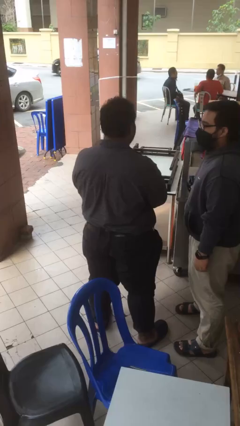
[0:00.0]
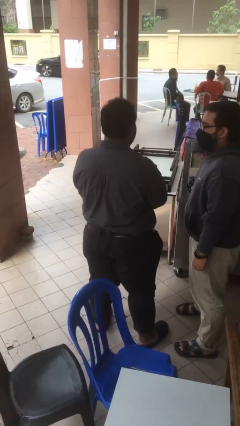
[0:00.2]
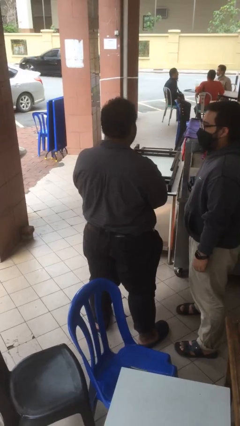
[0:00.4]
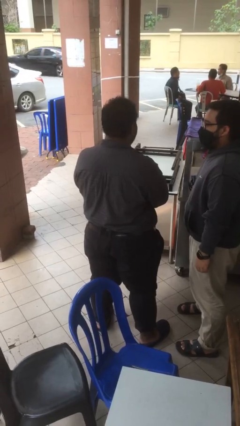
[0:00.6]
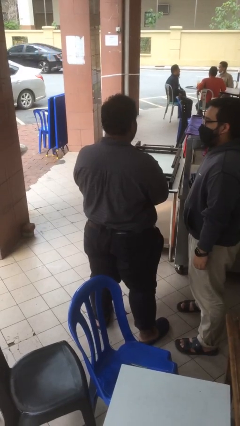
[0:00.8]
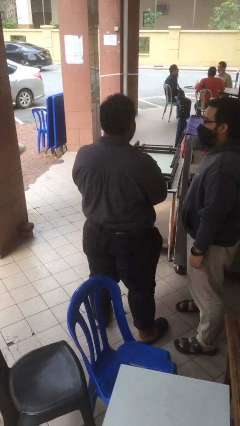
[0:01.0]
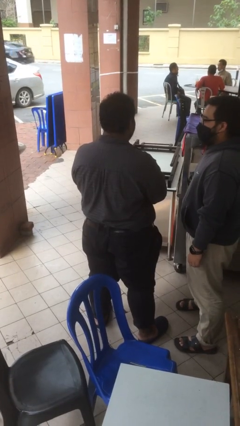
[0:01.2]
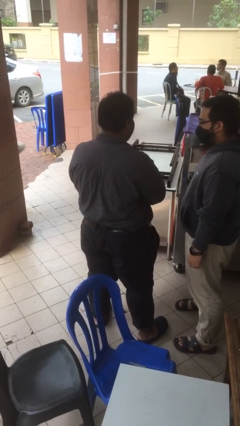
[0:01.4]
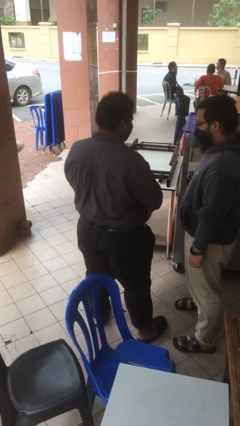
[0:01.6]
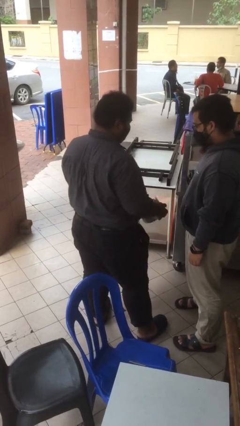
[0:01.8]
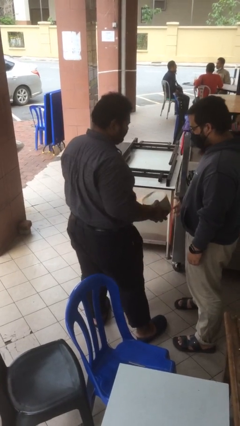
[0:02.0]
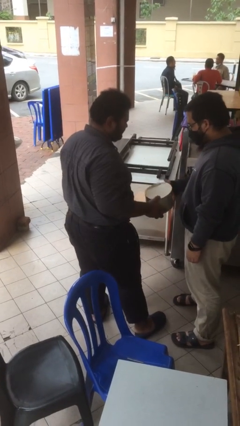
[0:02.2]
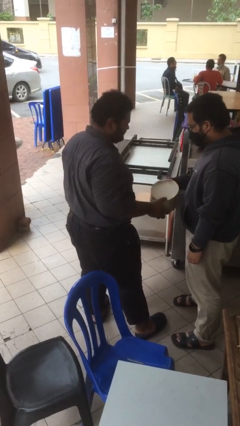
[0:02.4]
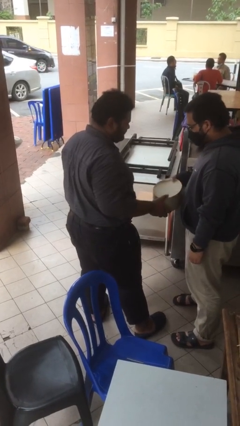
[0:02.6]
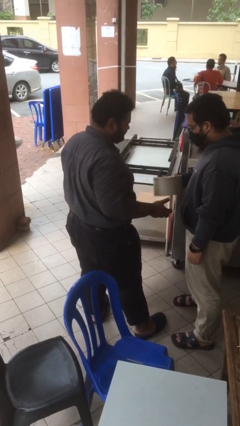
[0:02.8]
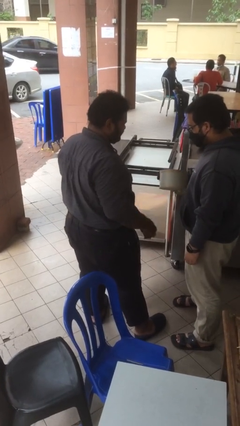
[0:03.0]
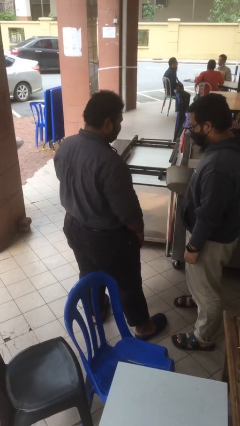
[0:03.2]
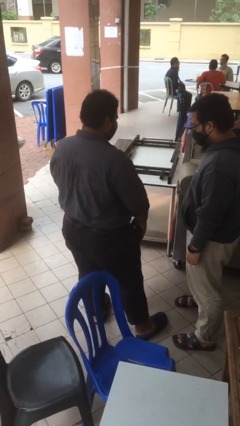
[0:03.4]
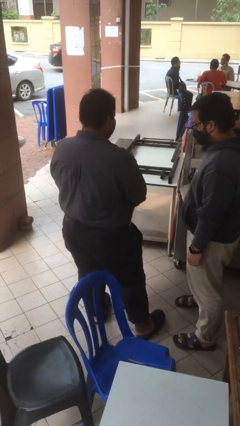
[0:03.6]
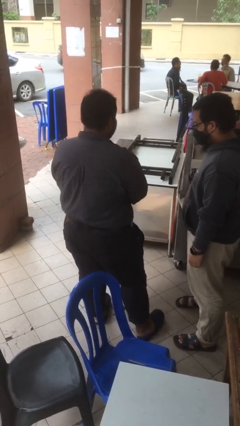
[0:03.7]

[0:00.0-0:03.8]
person transfers object to person

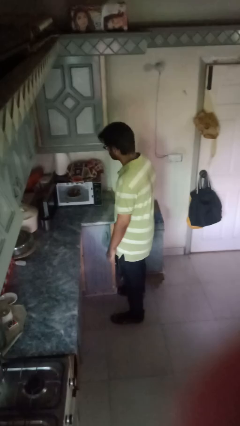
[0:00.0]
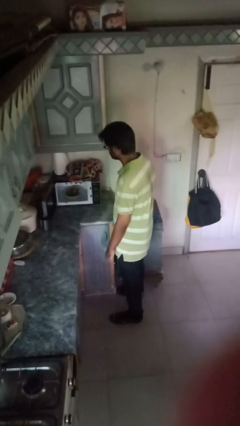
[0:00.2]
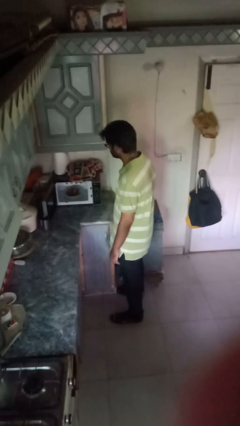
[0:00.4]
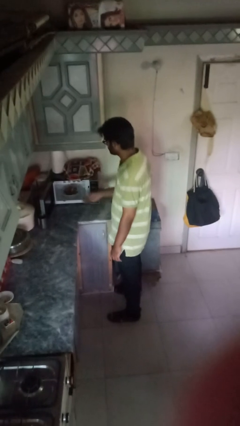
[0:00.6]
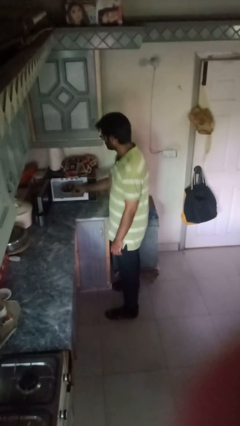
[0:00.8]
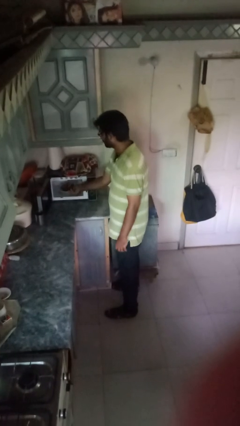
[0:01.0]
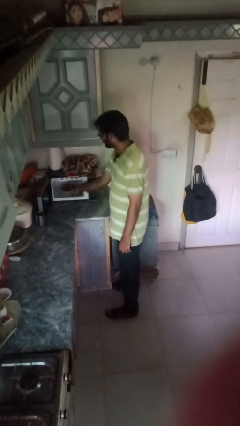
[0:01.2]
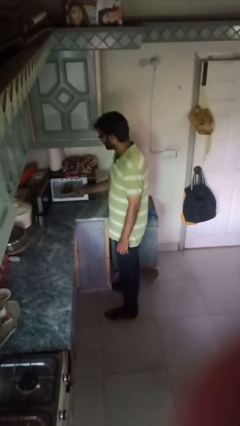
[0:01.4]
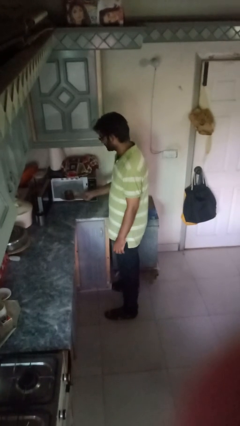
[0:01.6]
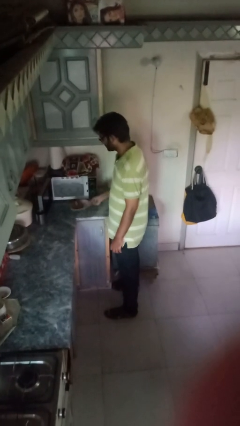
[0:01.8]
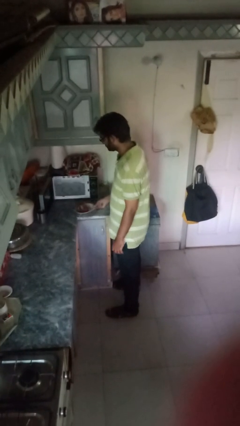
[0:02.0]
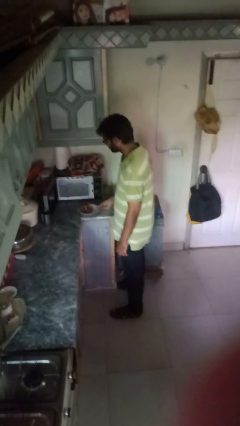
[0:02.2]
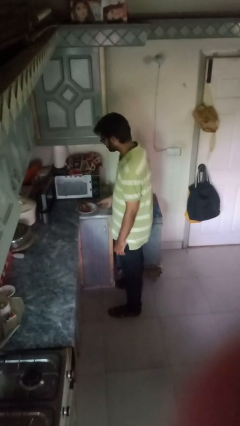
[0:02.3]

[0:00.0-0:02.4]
person takes object from oven

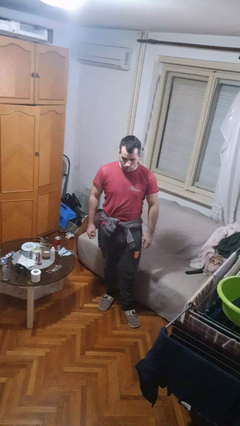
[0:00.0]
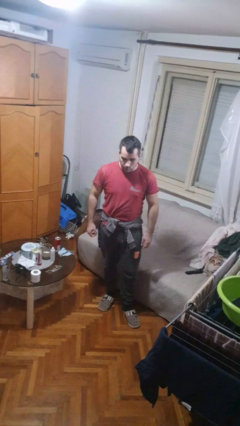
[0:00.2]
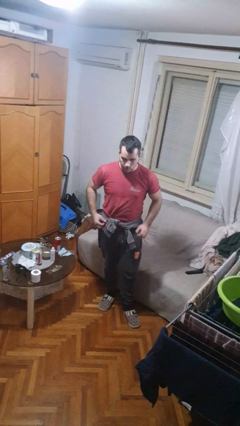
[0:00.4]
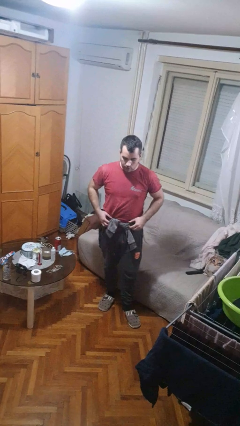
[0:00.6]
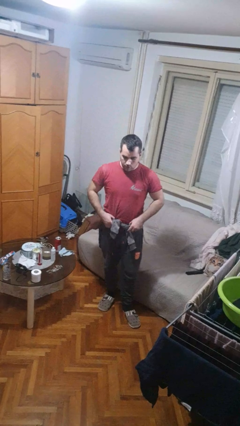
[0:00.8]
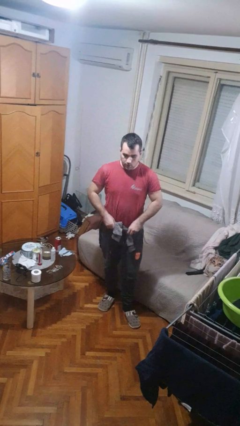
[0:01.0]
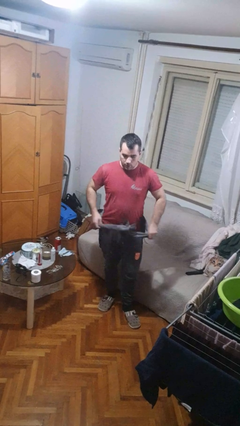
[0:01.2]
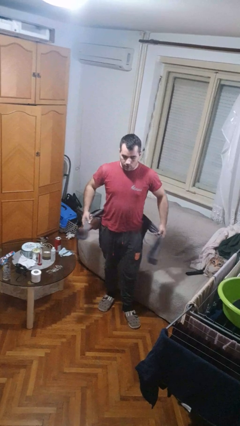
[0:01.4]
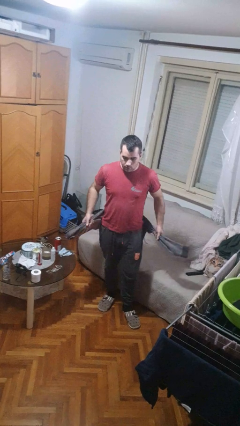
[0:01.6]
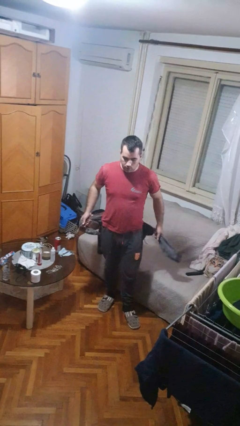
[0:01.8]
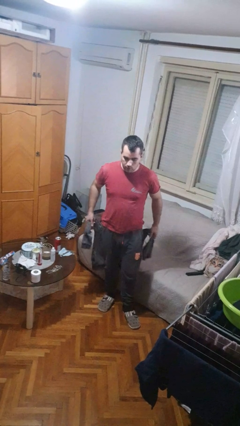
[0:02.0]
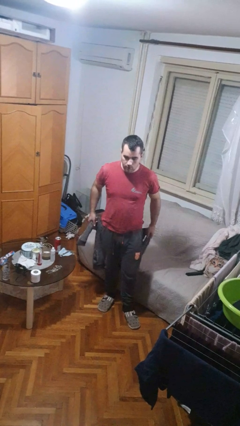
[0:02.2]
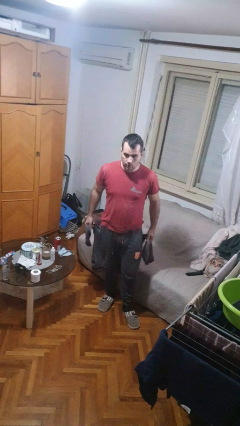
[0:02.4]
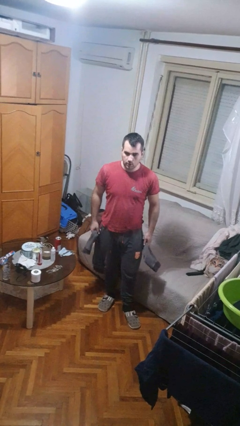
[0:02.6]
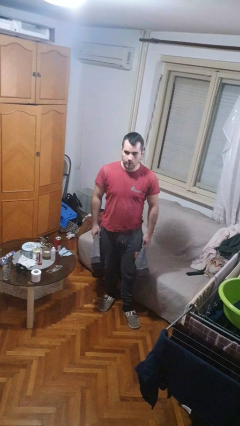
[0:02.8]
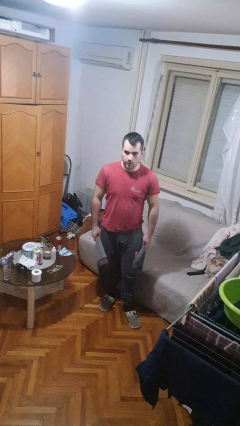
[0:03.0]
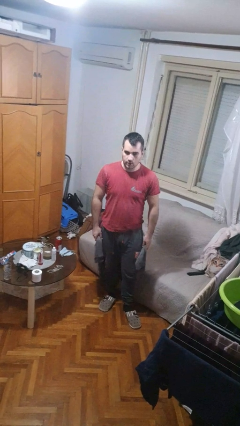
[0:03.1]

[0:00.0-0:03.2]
person unties jacket around waist

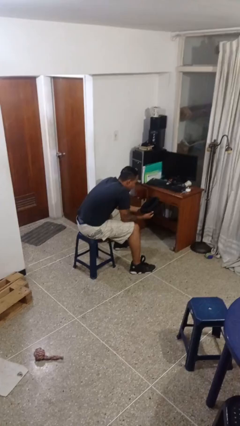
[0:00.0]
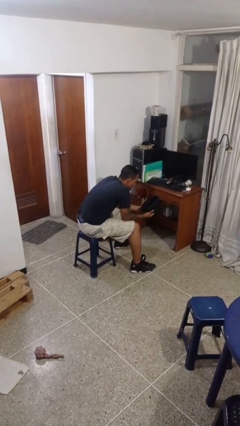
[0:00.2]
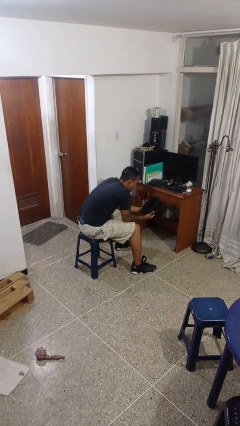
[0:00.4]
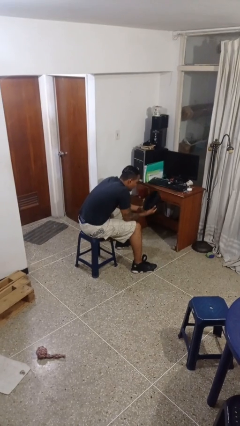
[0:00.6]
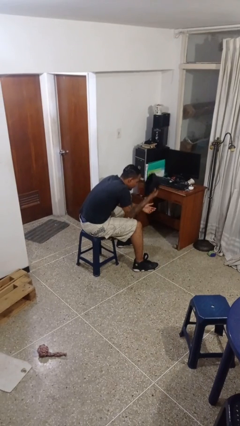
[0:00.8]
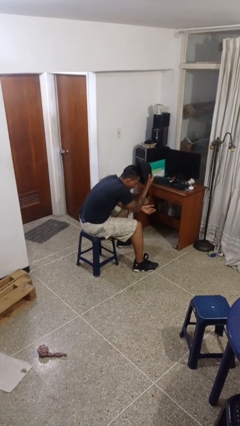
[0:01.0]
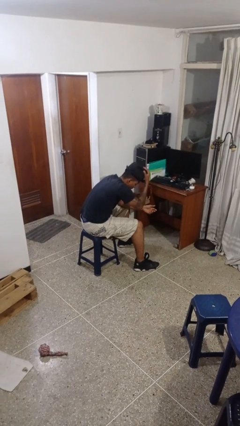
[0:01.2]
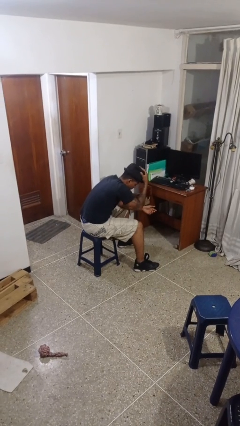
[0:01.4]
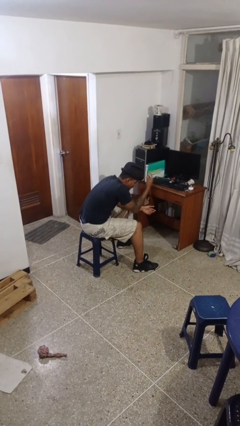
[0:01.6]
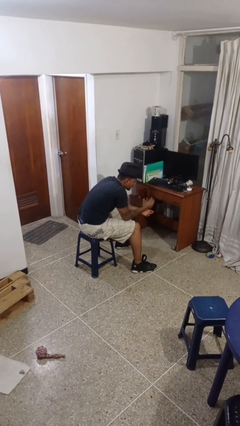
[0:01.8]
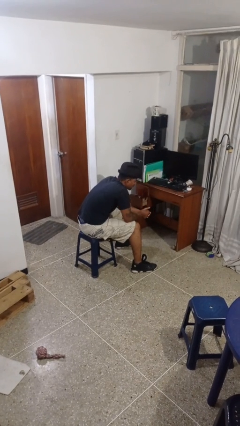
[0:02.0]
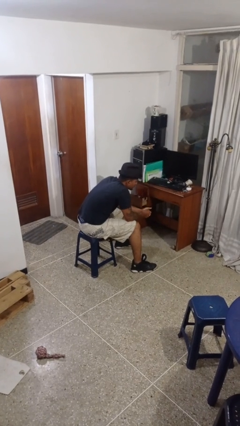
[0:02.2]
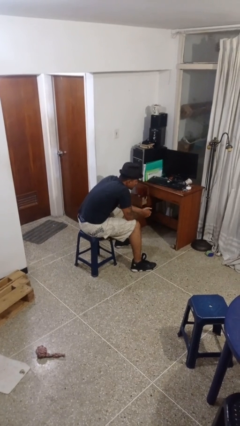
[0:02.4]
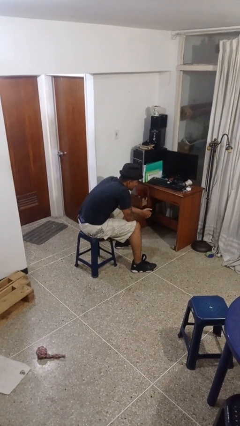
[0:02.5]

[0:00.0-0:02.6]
person puts on hat

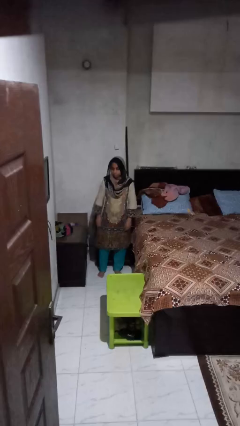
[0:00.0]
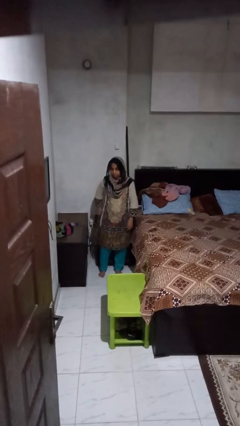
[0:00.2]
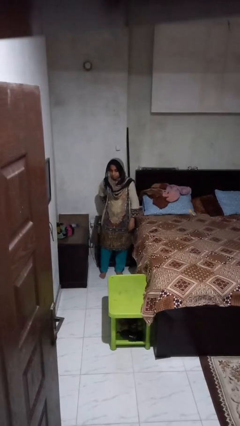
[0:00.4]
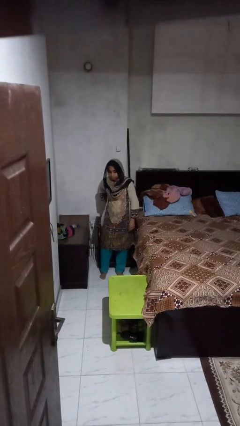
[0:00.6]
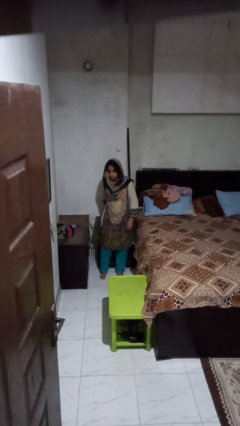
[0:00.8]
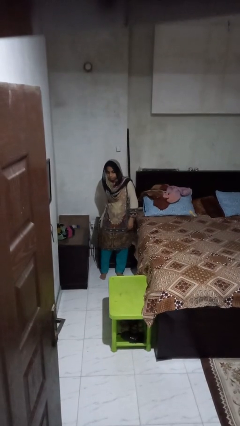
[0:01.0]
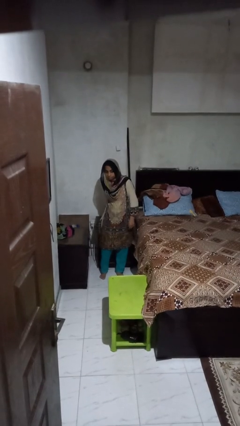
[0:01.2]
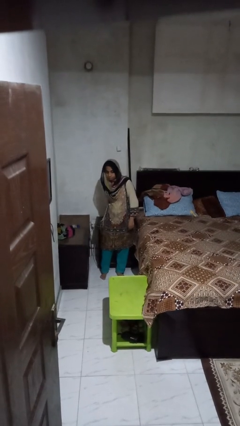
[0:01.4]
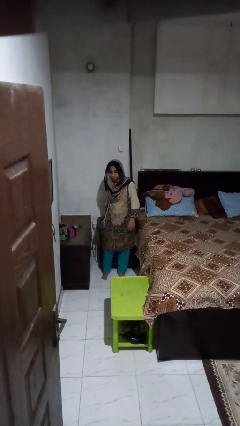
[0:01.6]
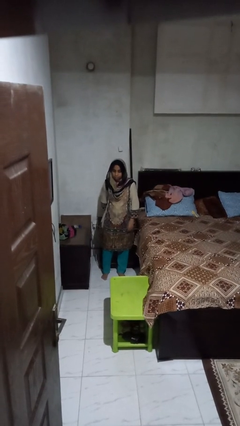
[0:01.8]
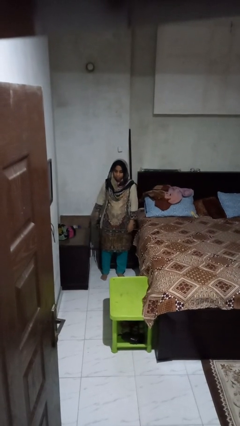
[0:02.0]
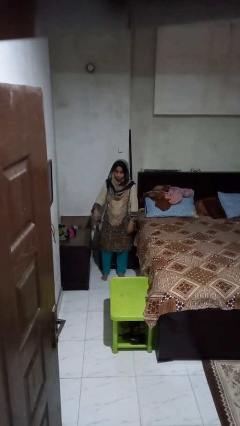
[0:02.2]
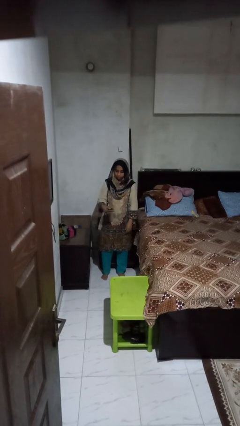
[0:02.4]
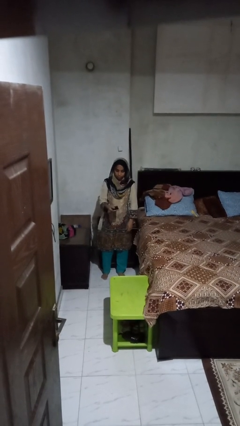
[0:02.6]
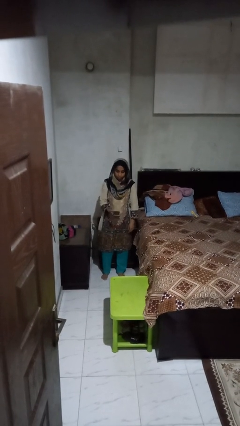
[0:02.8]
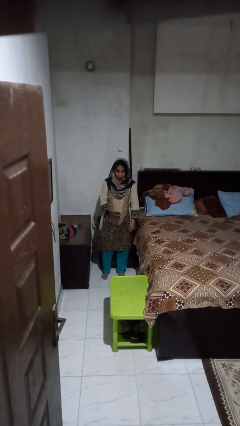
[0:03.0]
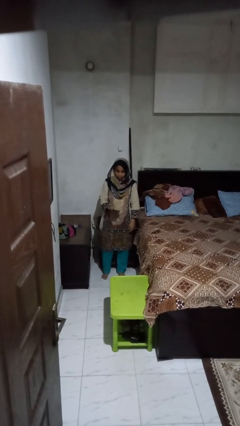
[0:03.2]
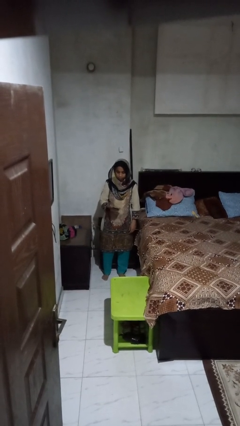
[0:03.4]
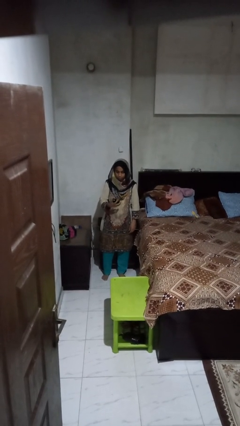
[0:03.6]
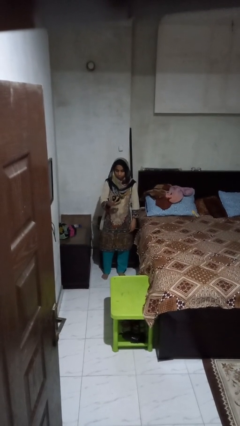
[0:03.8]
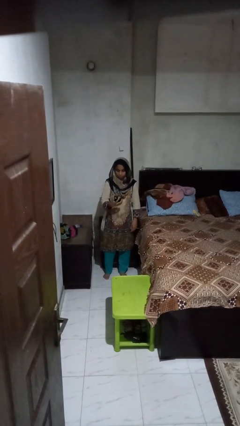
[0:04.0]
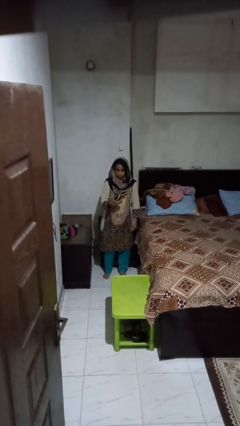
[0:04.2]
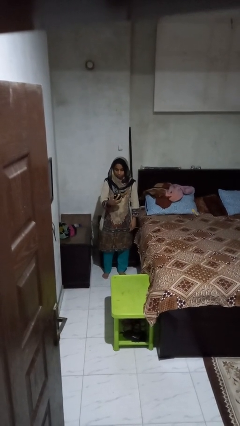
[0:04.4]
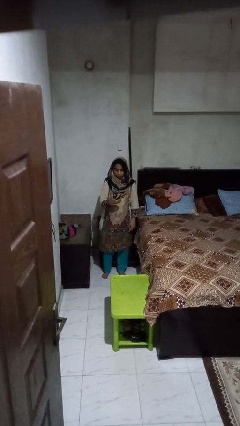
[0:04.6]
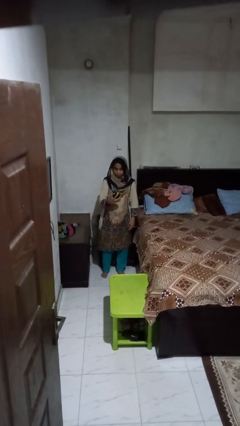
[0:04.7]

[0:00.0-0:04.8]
person takes phone from pocket

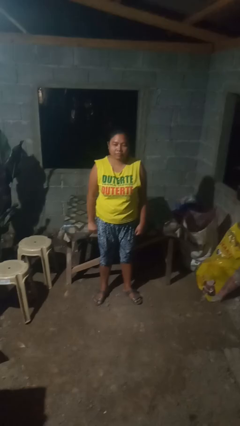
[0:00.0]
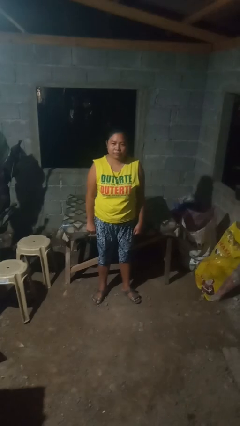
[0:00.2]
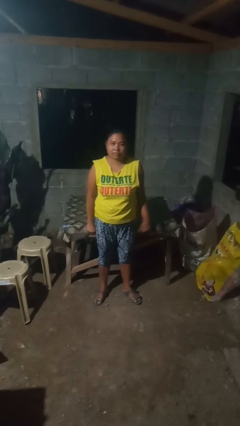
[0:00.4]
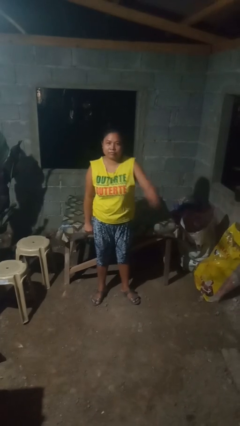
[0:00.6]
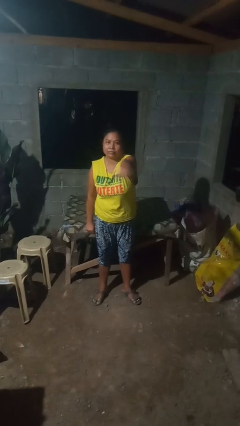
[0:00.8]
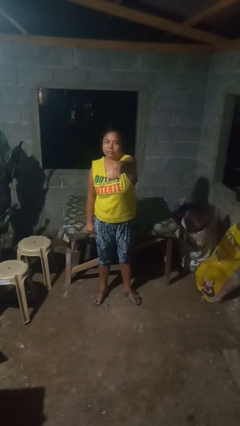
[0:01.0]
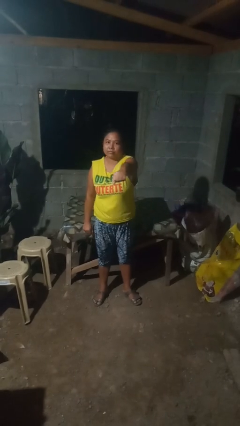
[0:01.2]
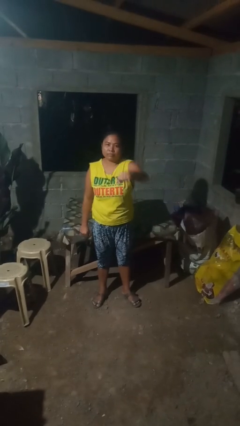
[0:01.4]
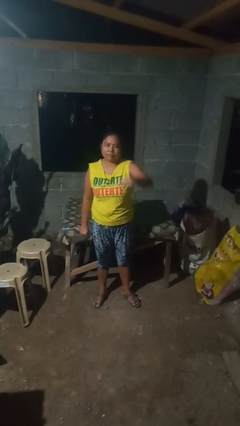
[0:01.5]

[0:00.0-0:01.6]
person punches
